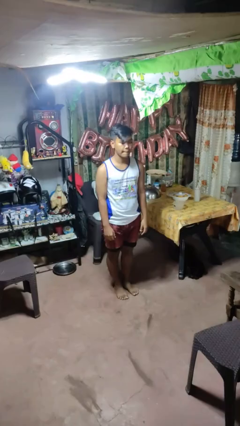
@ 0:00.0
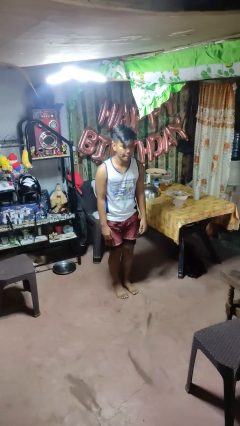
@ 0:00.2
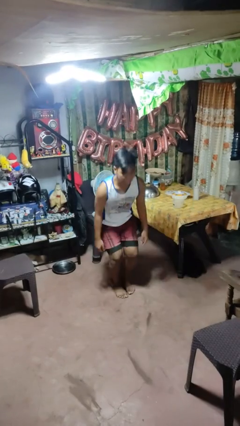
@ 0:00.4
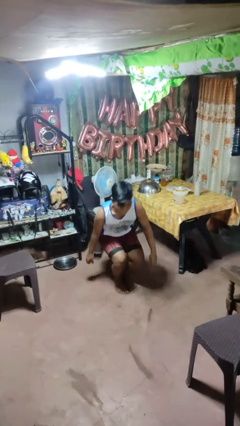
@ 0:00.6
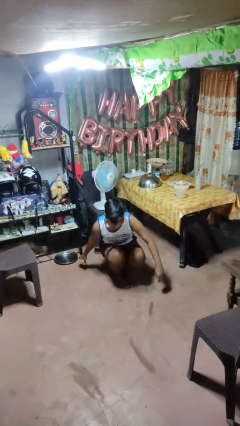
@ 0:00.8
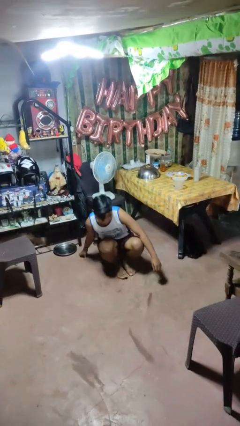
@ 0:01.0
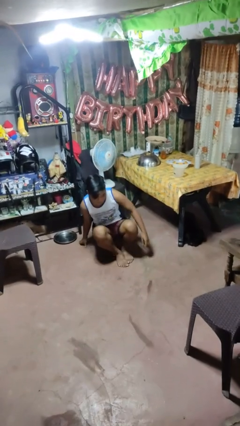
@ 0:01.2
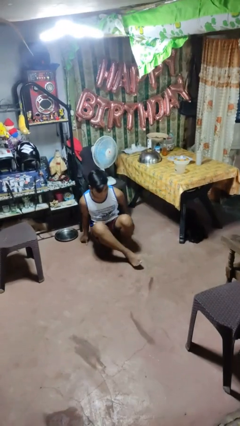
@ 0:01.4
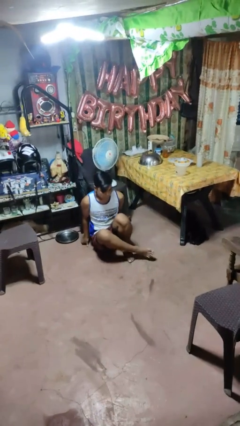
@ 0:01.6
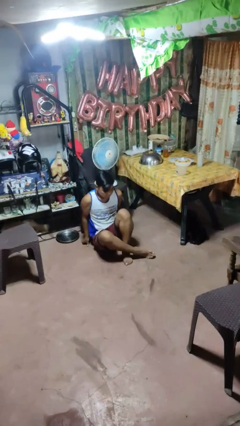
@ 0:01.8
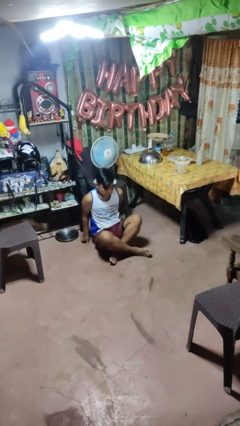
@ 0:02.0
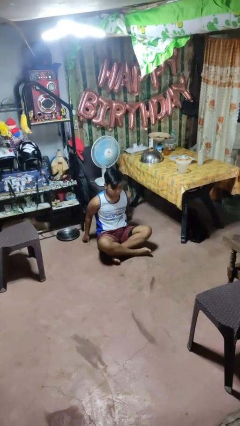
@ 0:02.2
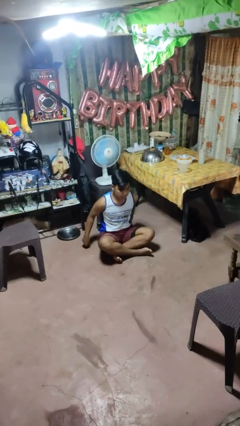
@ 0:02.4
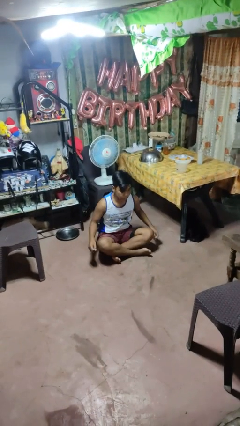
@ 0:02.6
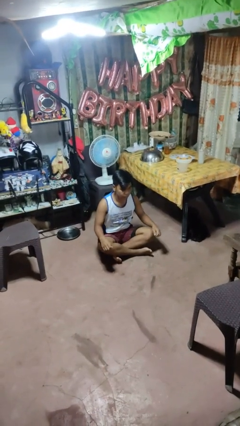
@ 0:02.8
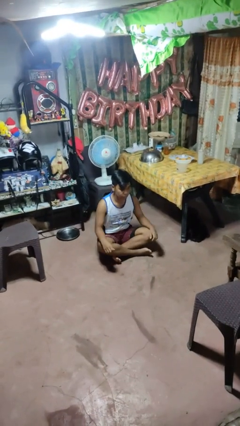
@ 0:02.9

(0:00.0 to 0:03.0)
person sits crisscross

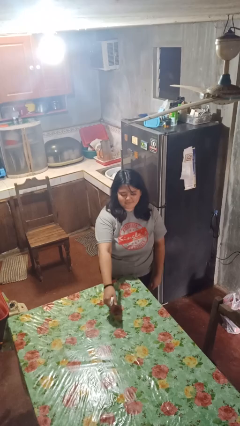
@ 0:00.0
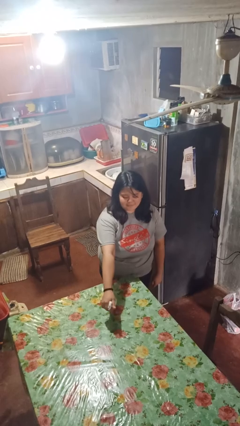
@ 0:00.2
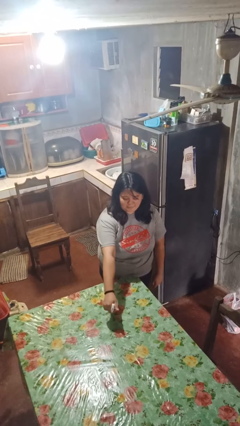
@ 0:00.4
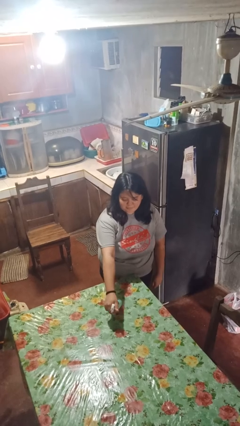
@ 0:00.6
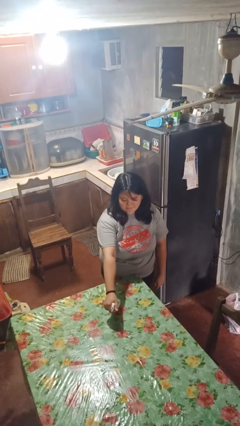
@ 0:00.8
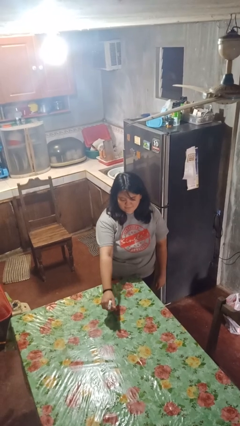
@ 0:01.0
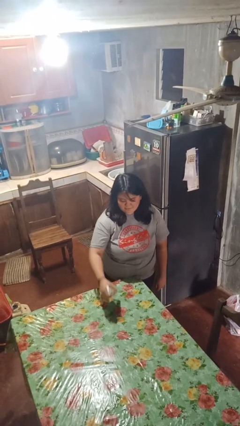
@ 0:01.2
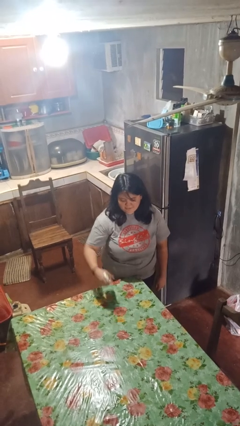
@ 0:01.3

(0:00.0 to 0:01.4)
person sprays from bottle

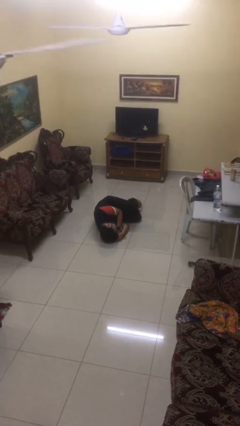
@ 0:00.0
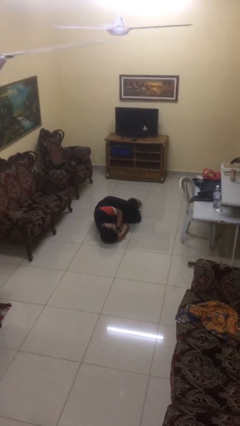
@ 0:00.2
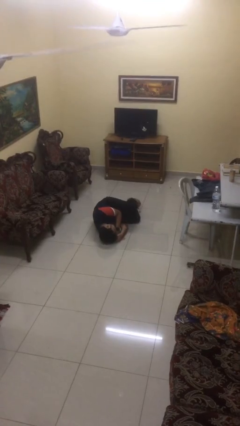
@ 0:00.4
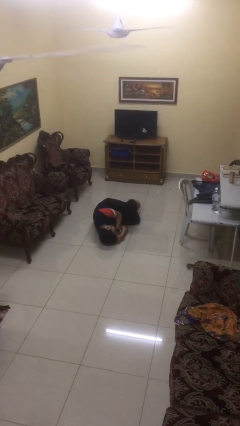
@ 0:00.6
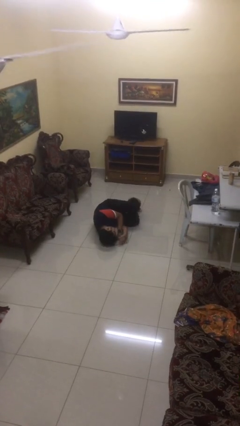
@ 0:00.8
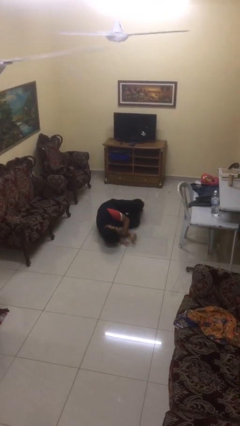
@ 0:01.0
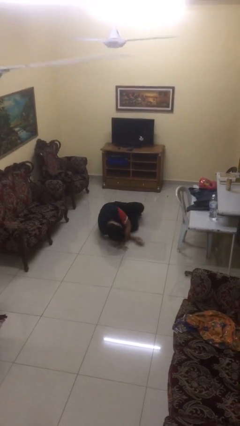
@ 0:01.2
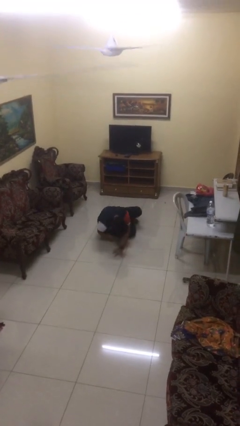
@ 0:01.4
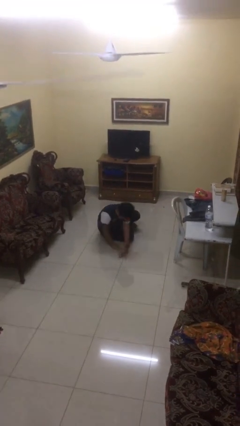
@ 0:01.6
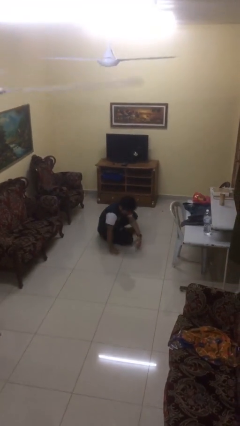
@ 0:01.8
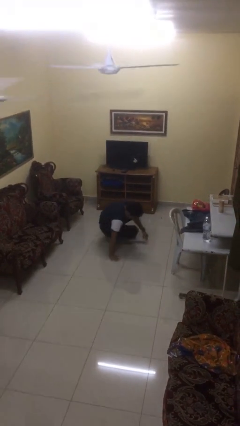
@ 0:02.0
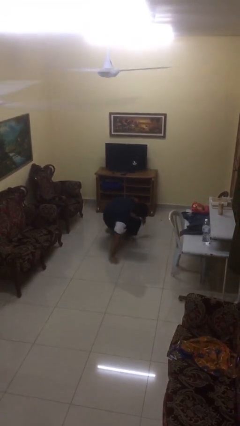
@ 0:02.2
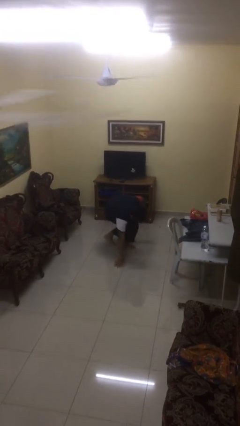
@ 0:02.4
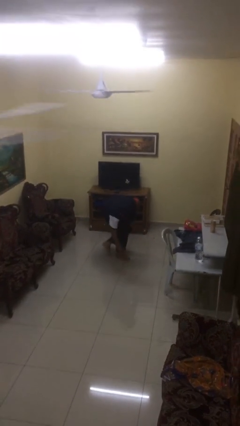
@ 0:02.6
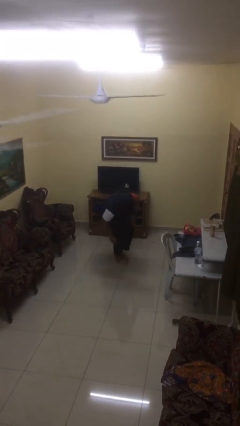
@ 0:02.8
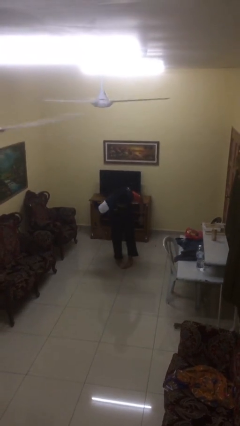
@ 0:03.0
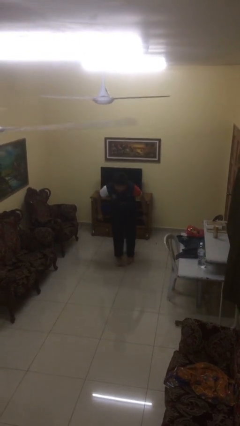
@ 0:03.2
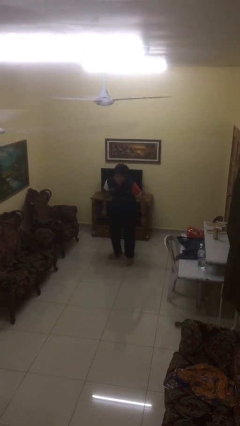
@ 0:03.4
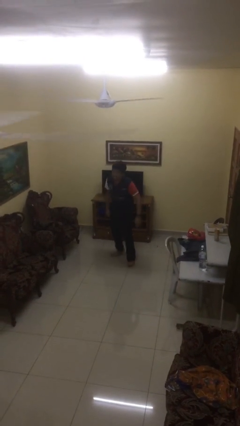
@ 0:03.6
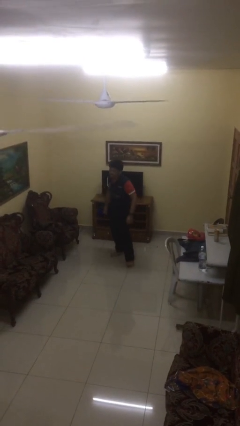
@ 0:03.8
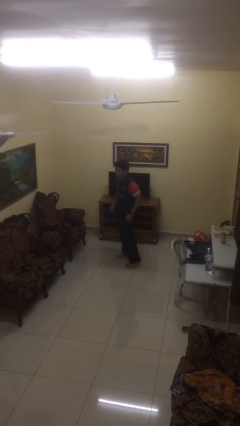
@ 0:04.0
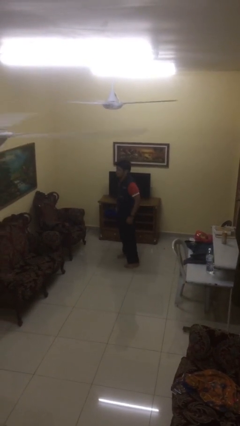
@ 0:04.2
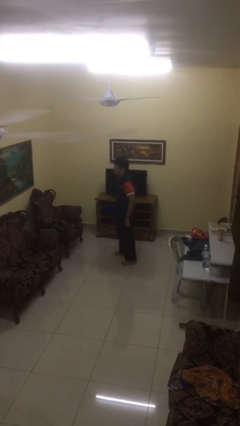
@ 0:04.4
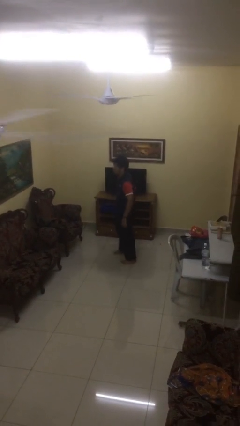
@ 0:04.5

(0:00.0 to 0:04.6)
person stands up from floor

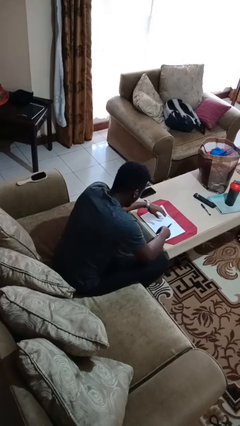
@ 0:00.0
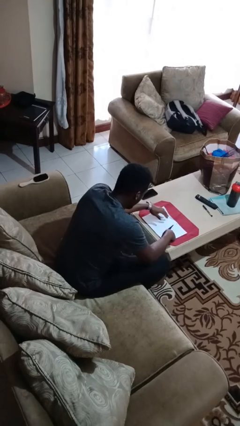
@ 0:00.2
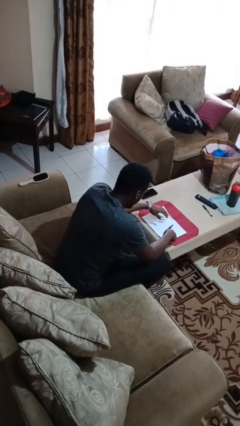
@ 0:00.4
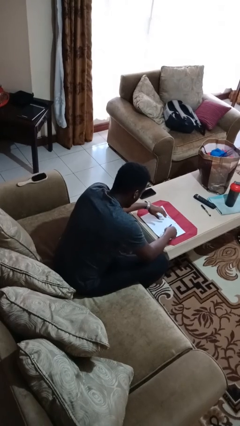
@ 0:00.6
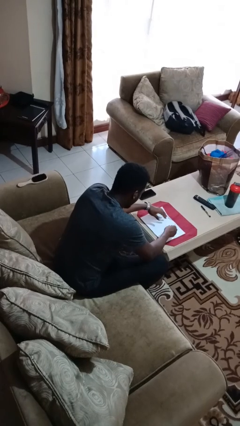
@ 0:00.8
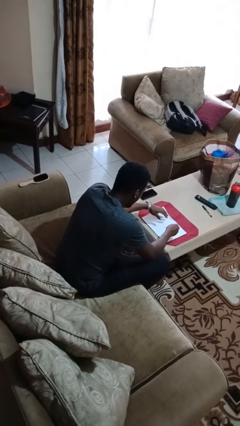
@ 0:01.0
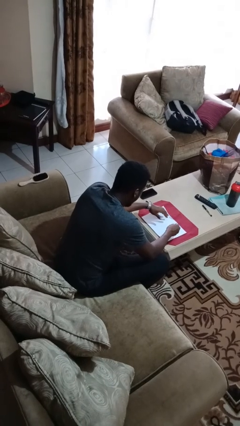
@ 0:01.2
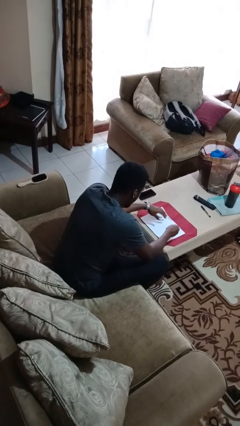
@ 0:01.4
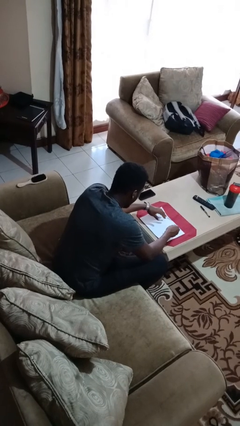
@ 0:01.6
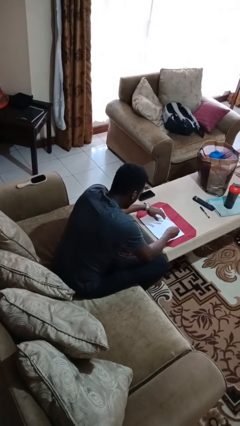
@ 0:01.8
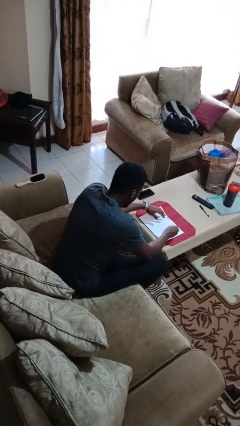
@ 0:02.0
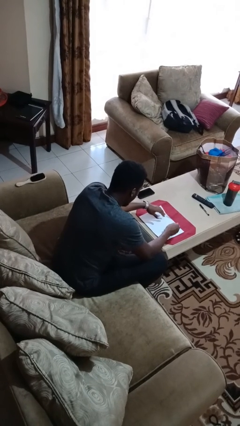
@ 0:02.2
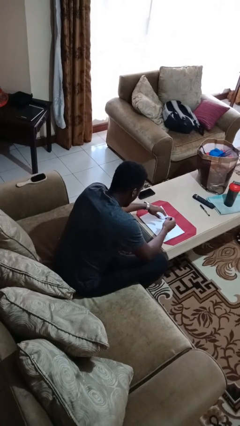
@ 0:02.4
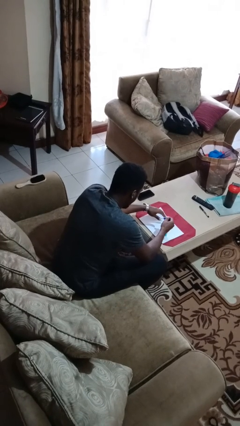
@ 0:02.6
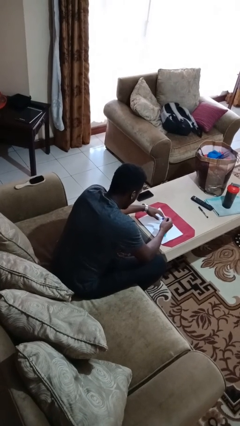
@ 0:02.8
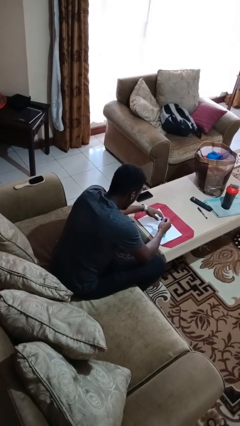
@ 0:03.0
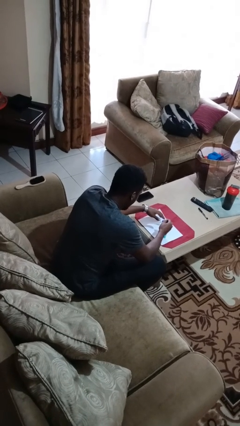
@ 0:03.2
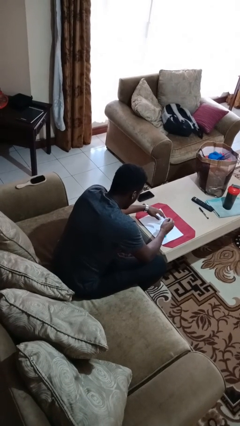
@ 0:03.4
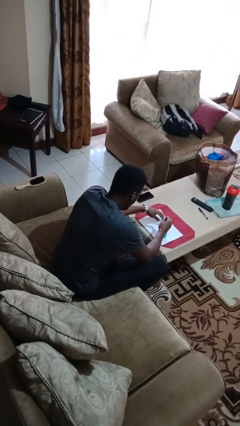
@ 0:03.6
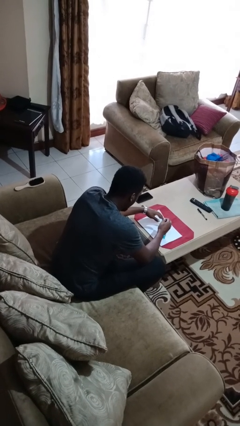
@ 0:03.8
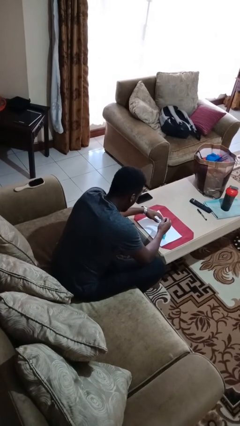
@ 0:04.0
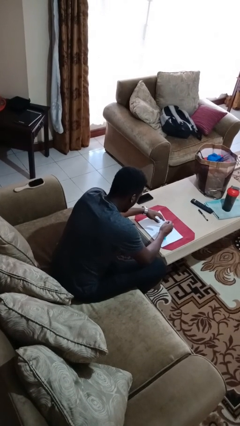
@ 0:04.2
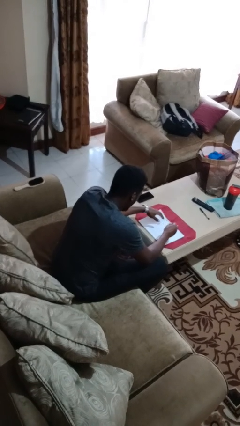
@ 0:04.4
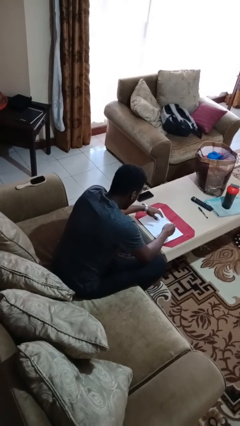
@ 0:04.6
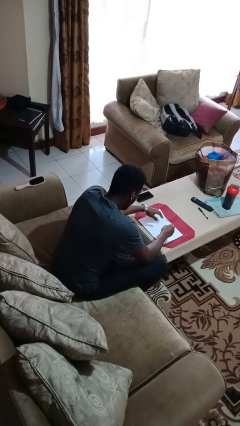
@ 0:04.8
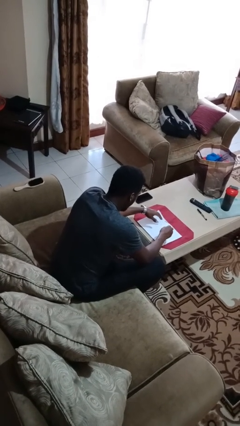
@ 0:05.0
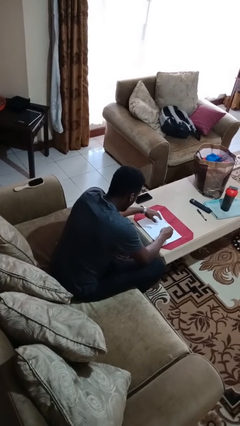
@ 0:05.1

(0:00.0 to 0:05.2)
person paints fingernails

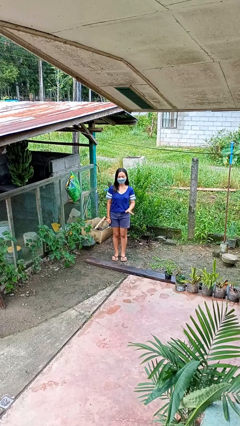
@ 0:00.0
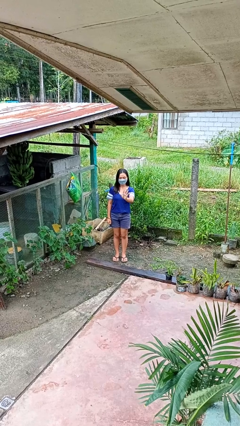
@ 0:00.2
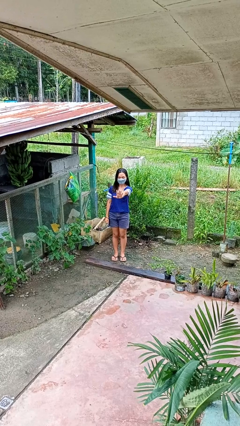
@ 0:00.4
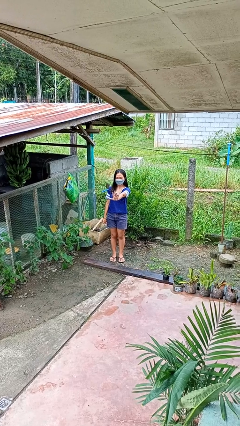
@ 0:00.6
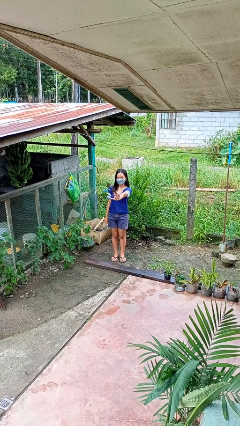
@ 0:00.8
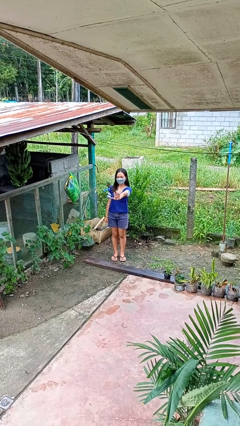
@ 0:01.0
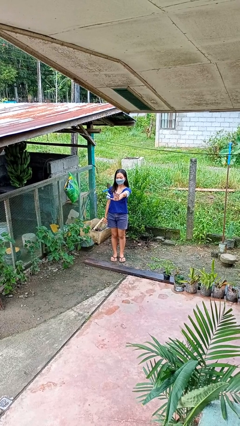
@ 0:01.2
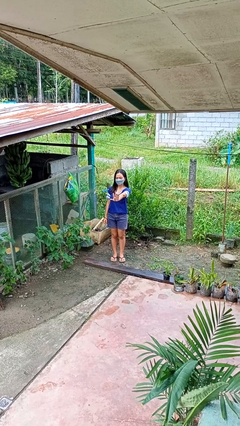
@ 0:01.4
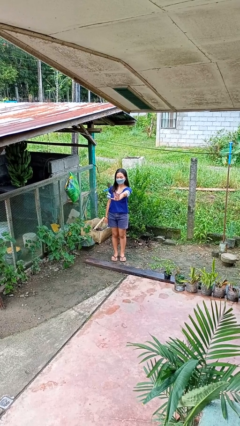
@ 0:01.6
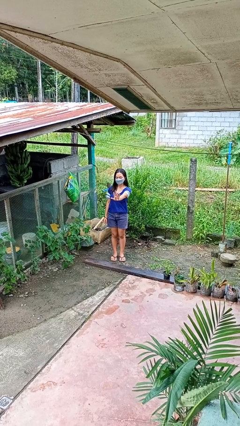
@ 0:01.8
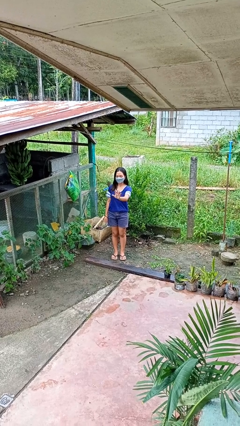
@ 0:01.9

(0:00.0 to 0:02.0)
person gestures stop

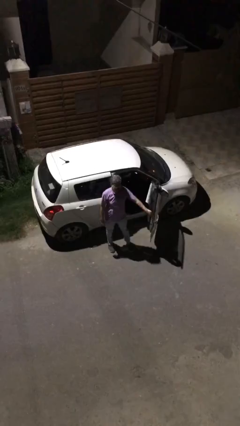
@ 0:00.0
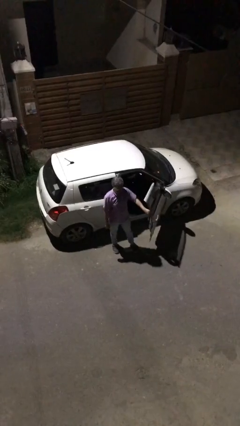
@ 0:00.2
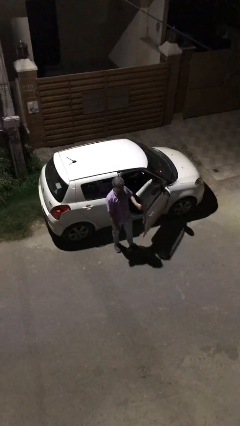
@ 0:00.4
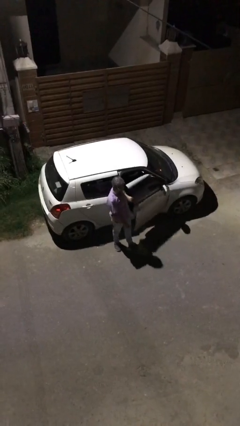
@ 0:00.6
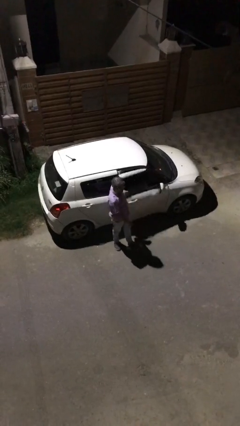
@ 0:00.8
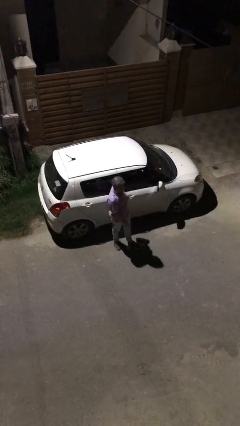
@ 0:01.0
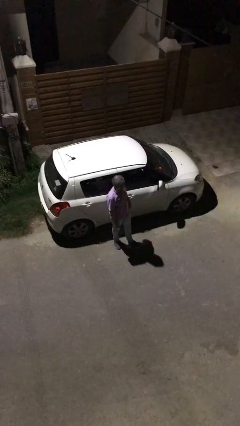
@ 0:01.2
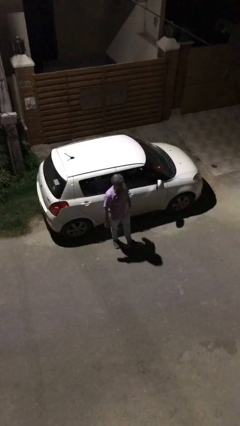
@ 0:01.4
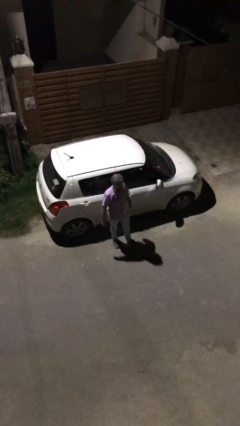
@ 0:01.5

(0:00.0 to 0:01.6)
person closes car door
